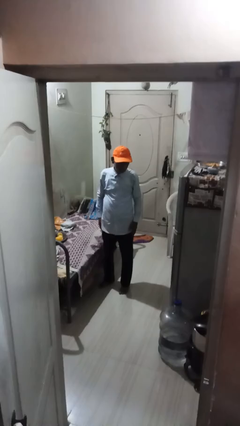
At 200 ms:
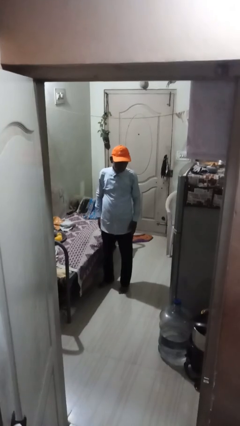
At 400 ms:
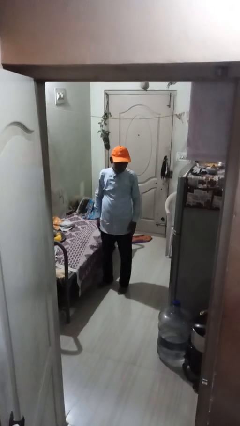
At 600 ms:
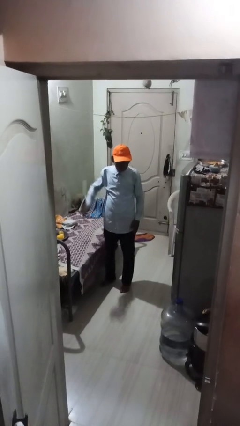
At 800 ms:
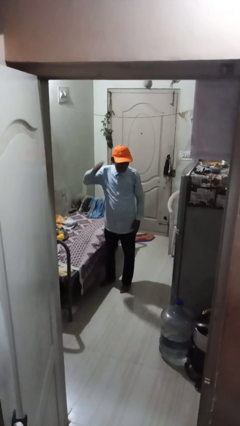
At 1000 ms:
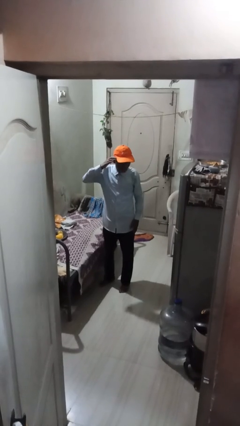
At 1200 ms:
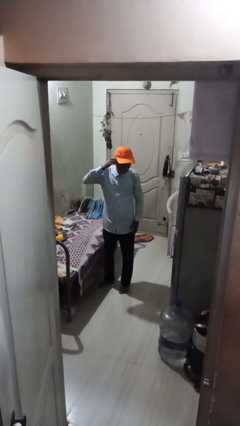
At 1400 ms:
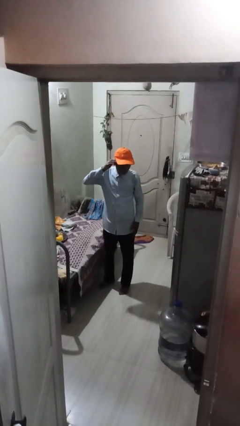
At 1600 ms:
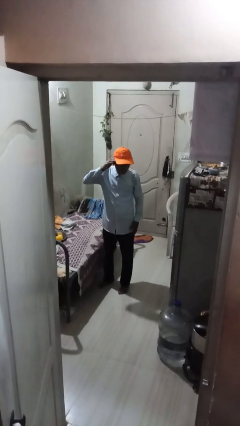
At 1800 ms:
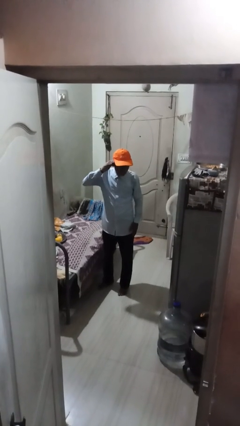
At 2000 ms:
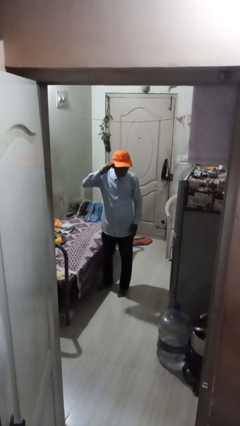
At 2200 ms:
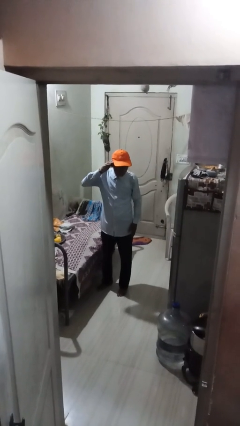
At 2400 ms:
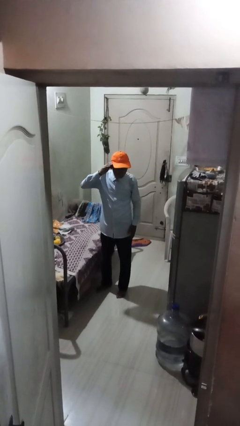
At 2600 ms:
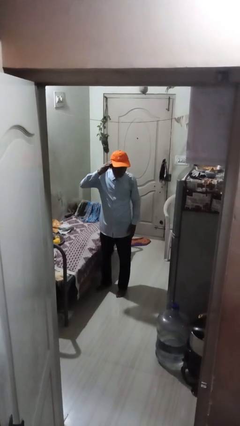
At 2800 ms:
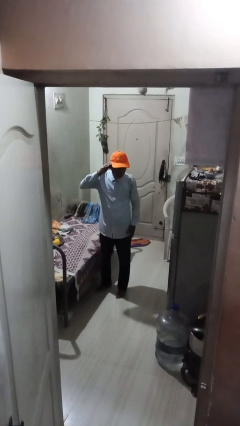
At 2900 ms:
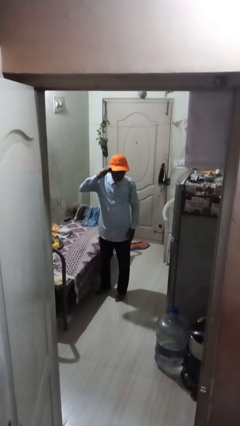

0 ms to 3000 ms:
person gestures listen closely

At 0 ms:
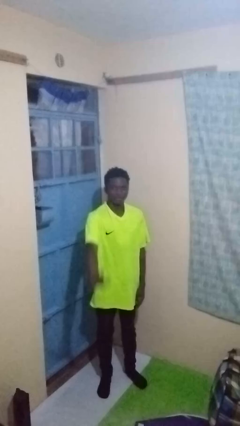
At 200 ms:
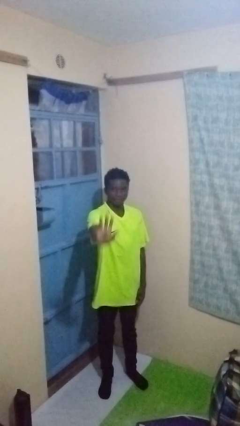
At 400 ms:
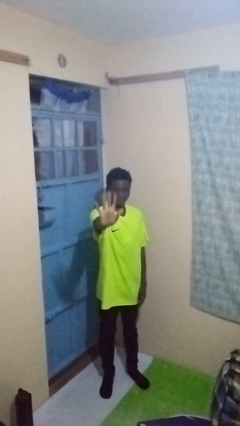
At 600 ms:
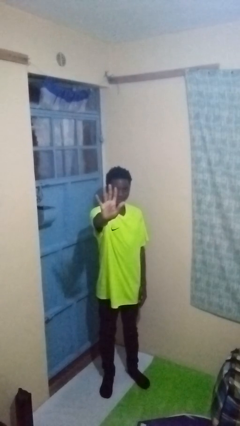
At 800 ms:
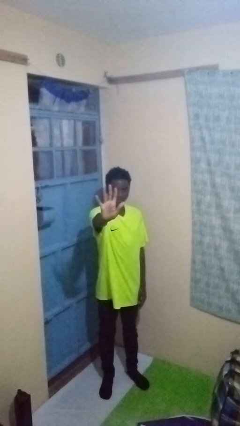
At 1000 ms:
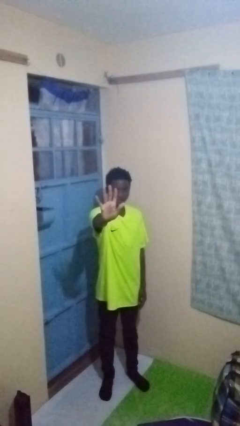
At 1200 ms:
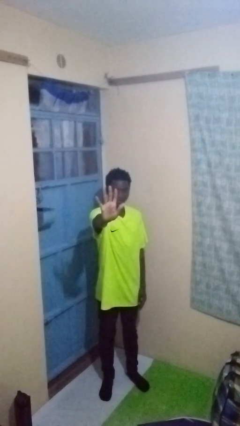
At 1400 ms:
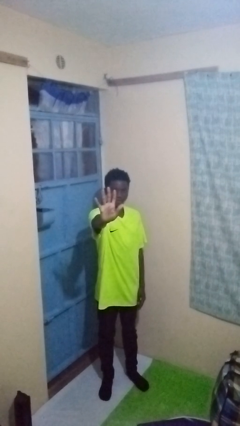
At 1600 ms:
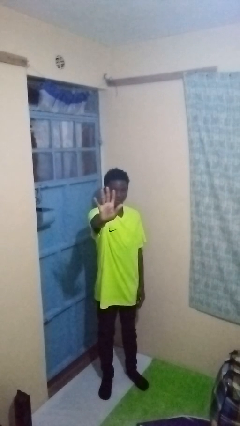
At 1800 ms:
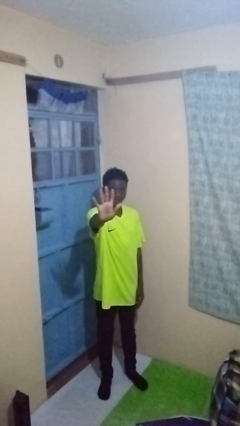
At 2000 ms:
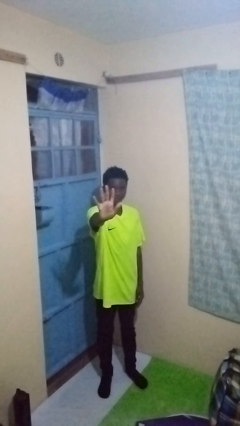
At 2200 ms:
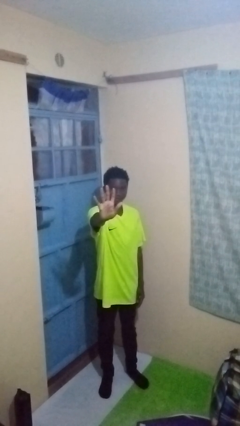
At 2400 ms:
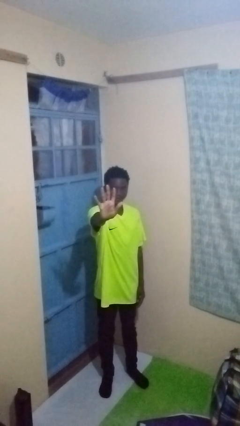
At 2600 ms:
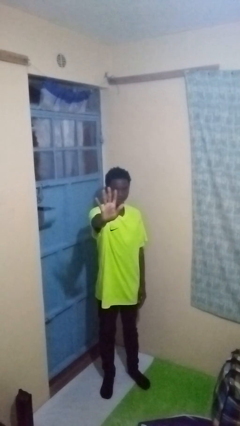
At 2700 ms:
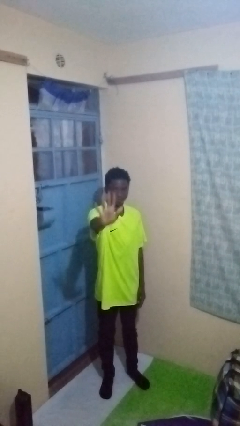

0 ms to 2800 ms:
person gestures stop

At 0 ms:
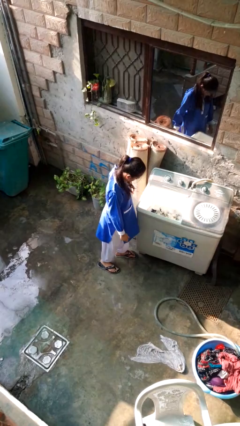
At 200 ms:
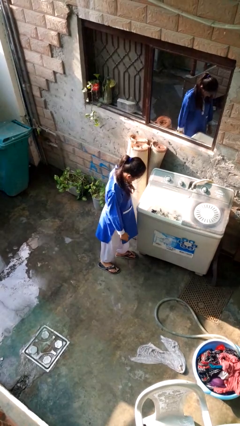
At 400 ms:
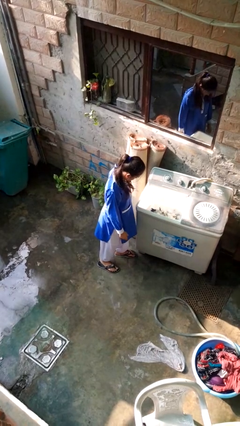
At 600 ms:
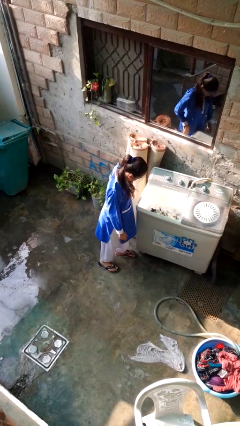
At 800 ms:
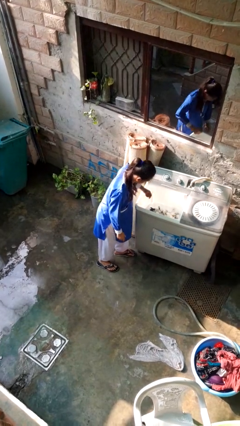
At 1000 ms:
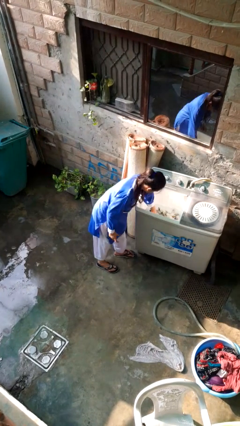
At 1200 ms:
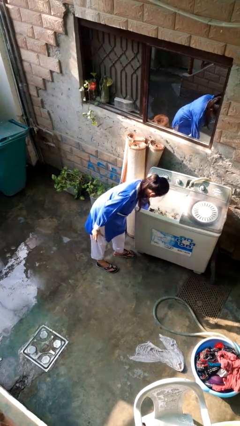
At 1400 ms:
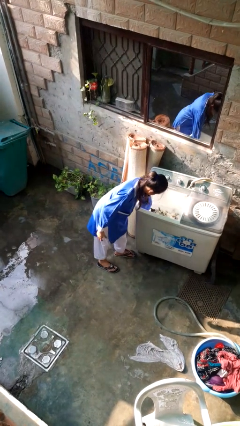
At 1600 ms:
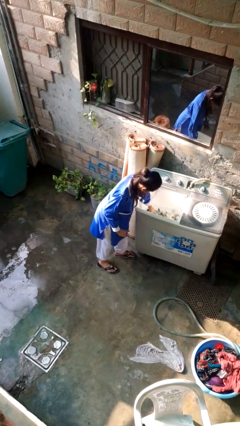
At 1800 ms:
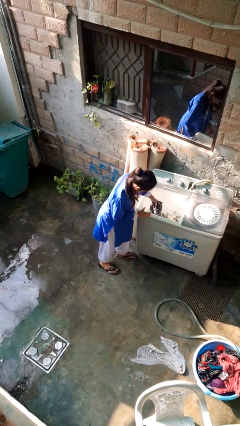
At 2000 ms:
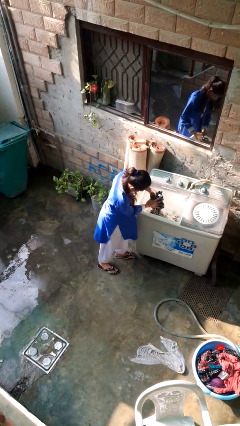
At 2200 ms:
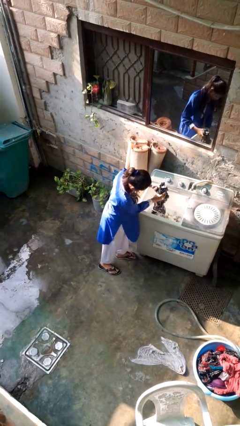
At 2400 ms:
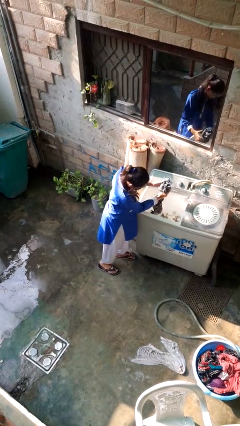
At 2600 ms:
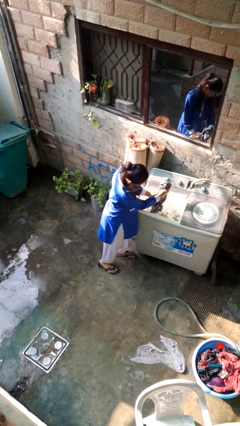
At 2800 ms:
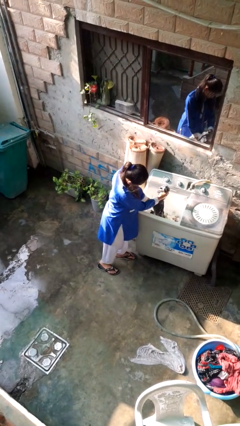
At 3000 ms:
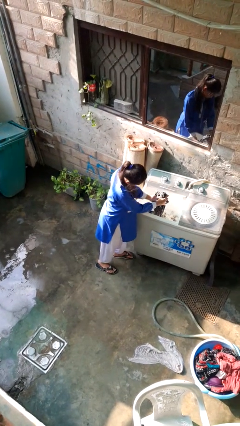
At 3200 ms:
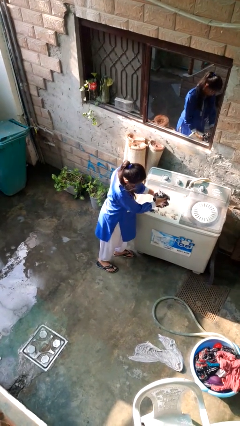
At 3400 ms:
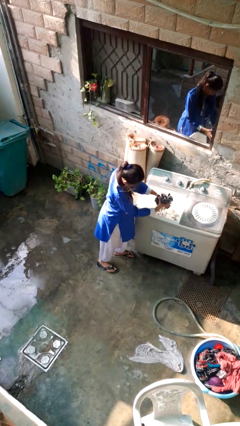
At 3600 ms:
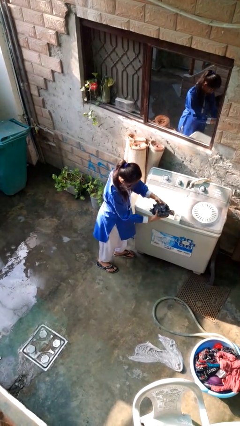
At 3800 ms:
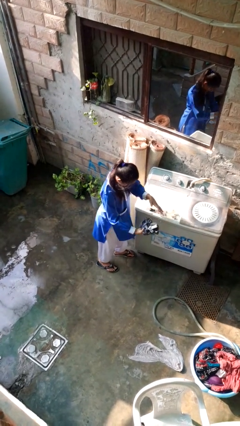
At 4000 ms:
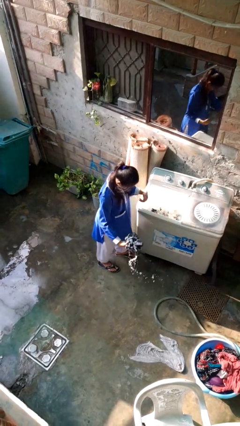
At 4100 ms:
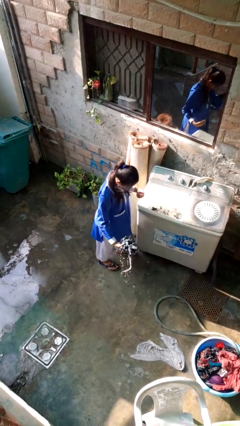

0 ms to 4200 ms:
person unloads clotheswasher

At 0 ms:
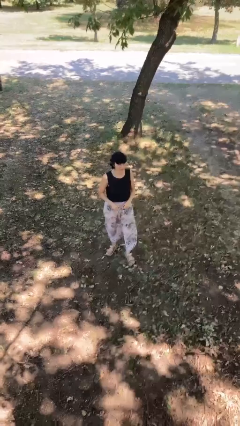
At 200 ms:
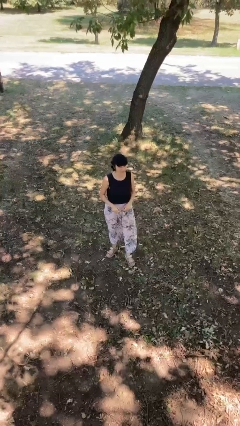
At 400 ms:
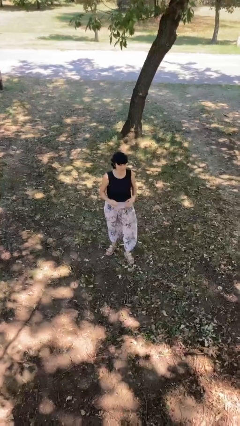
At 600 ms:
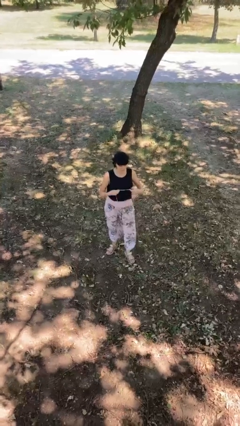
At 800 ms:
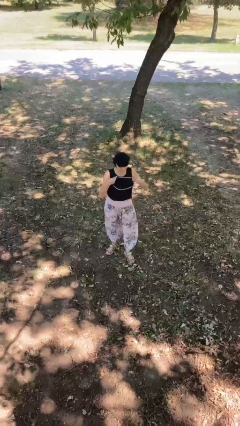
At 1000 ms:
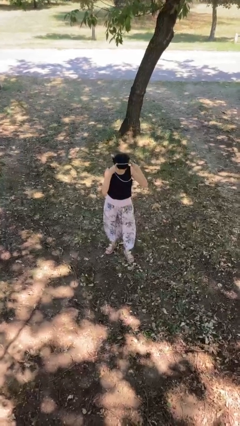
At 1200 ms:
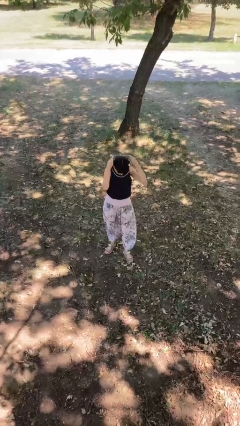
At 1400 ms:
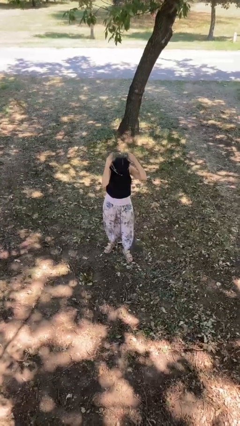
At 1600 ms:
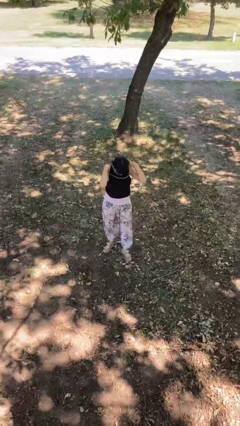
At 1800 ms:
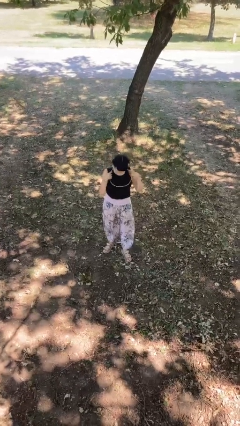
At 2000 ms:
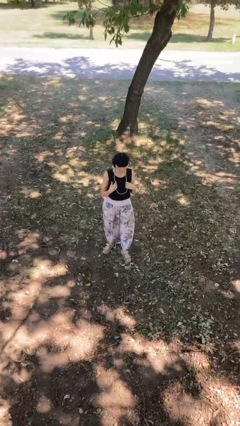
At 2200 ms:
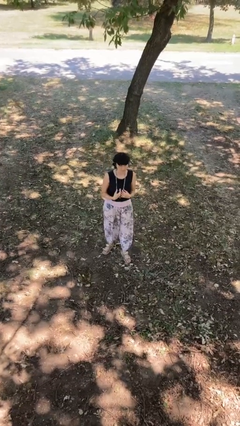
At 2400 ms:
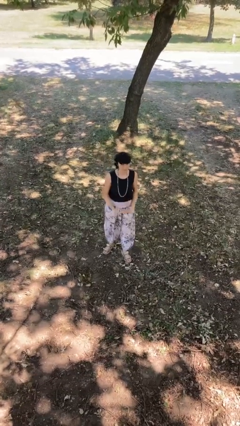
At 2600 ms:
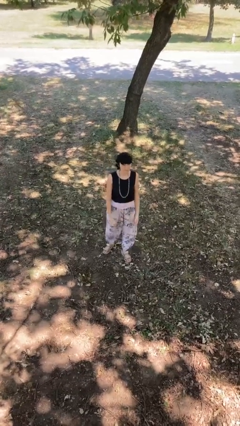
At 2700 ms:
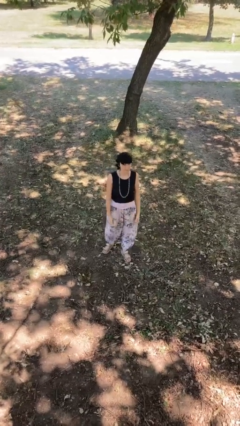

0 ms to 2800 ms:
person puts on necklace

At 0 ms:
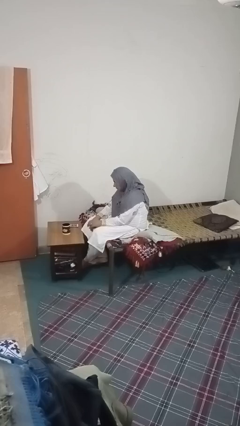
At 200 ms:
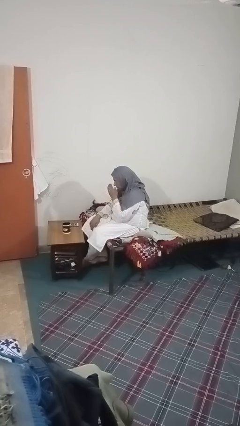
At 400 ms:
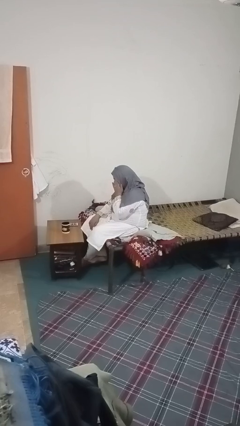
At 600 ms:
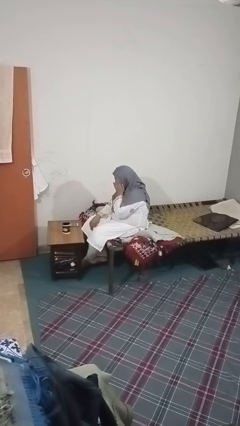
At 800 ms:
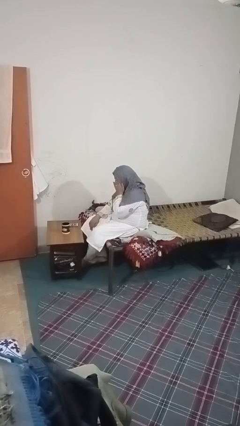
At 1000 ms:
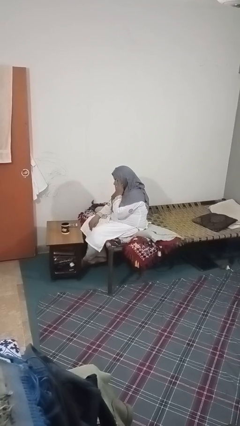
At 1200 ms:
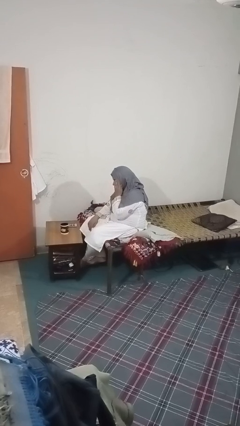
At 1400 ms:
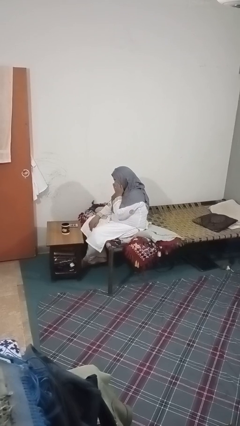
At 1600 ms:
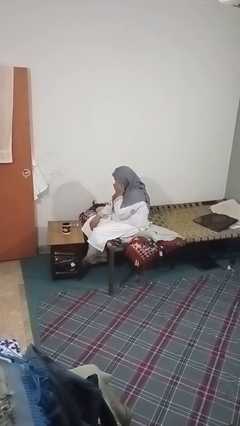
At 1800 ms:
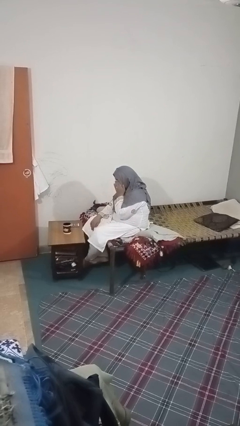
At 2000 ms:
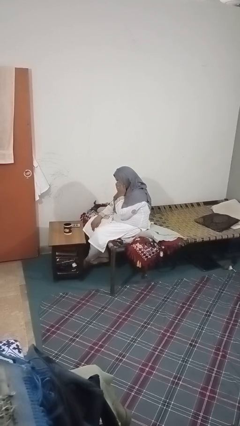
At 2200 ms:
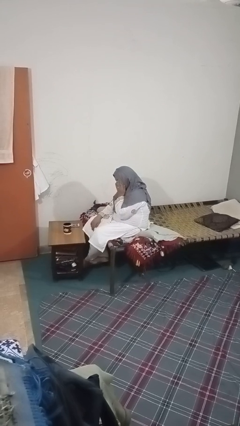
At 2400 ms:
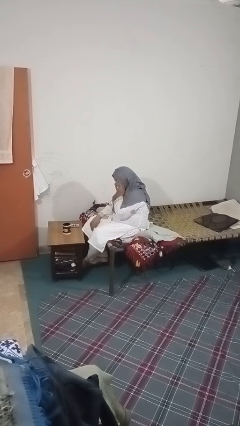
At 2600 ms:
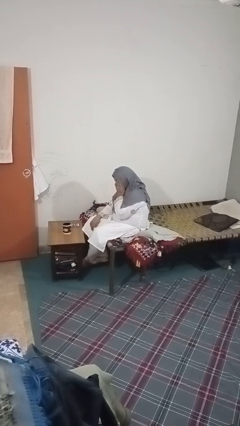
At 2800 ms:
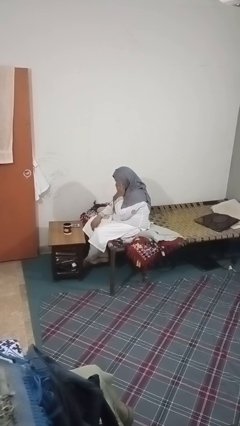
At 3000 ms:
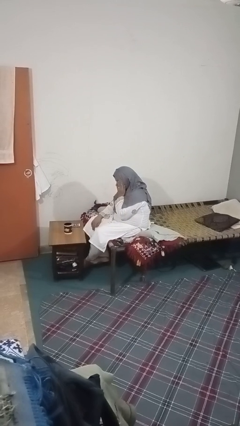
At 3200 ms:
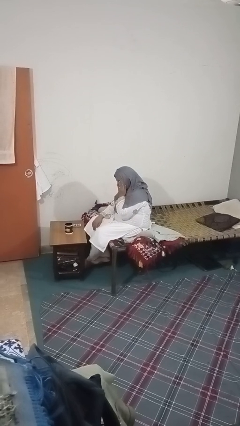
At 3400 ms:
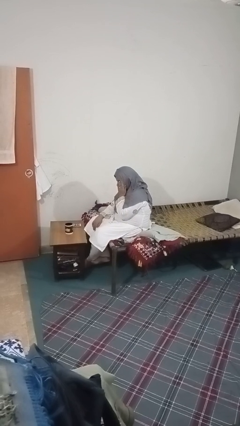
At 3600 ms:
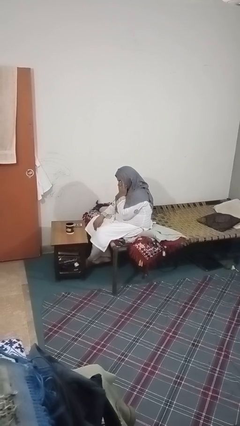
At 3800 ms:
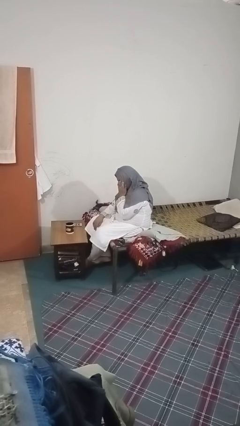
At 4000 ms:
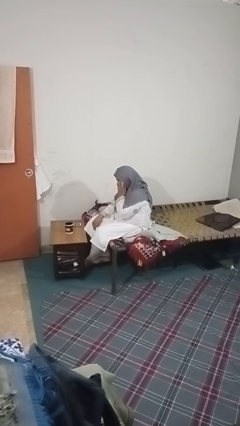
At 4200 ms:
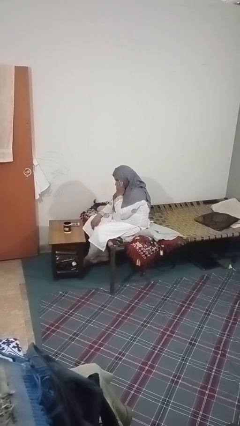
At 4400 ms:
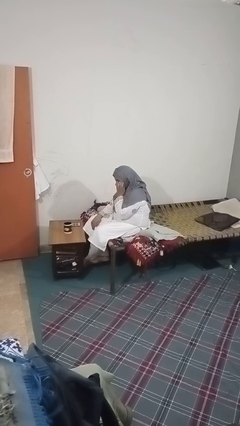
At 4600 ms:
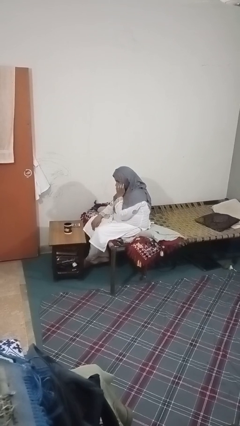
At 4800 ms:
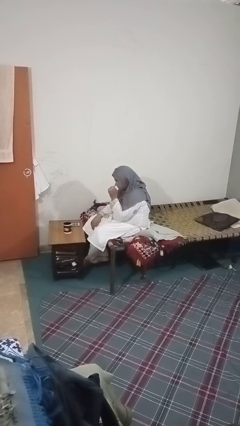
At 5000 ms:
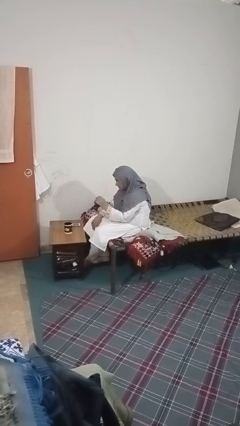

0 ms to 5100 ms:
person rubs eyes
